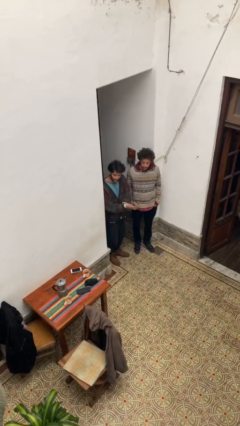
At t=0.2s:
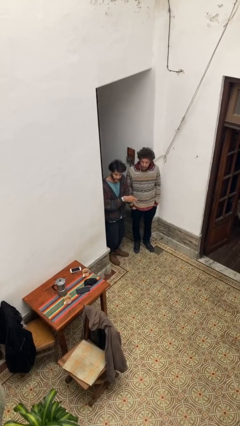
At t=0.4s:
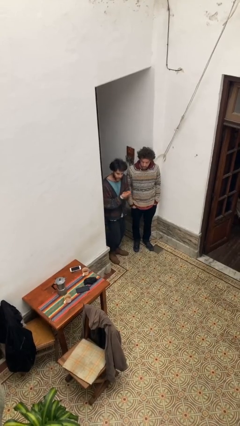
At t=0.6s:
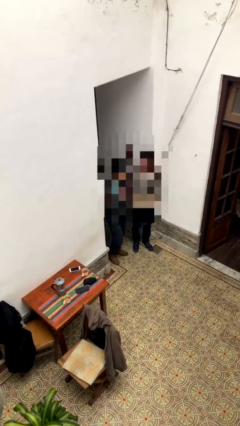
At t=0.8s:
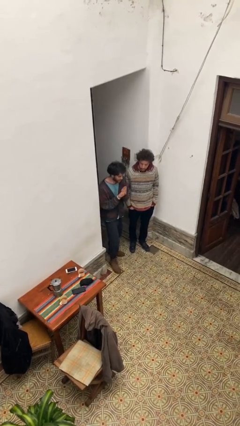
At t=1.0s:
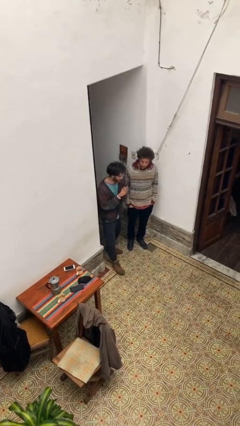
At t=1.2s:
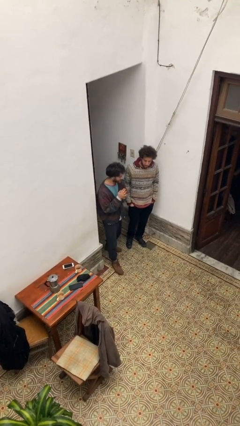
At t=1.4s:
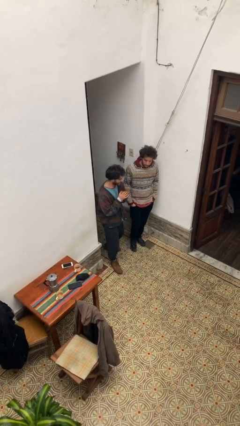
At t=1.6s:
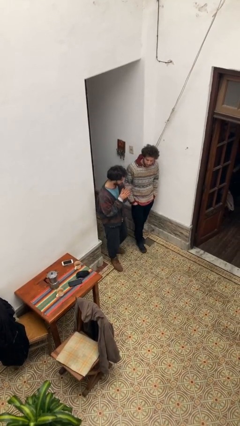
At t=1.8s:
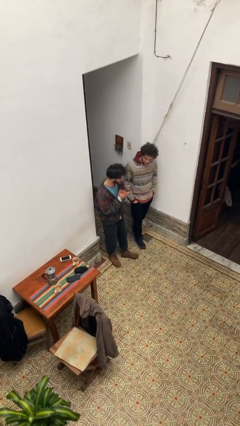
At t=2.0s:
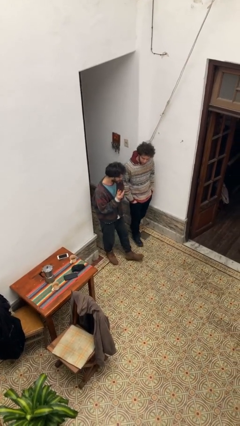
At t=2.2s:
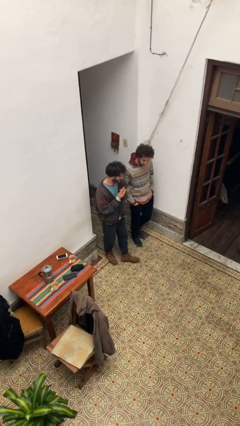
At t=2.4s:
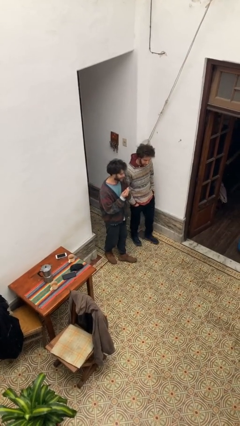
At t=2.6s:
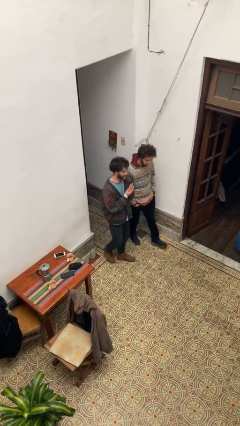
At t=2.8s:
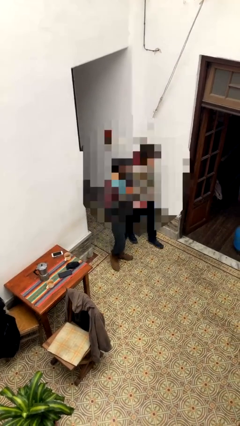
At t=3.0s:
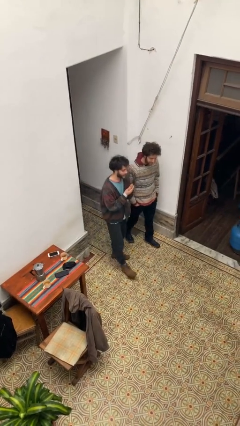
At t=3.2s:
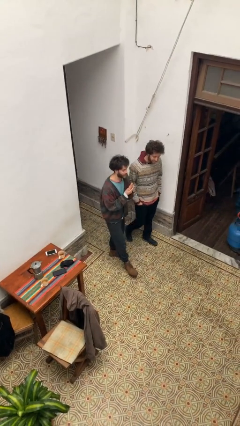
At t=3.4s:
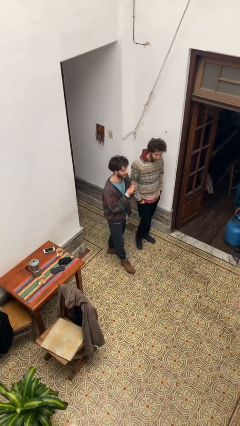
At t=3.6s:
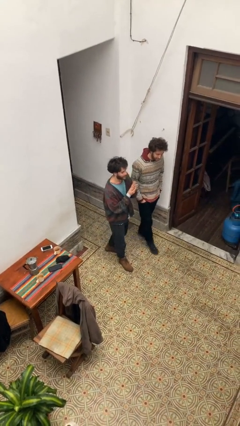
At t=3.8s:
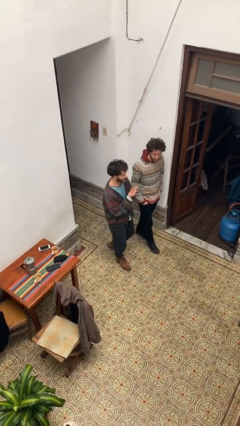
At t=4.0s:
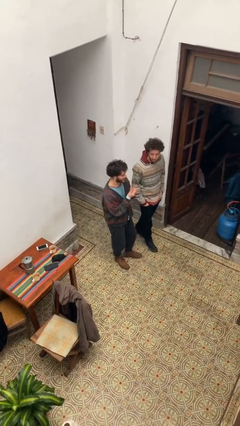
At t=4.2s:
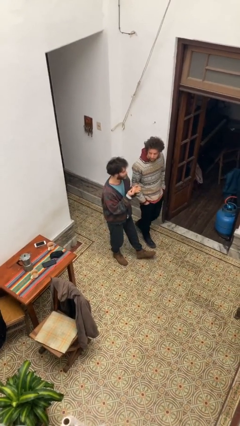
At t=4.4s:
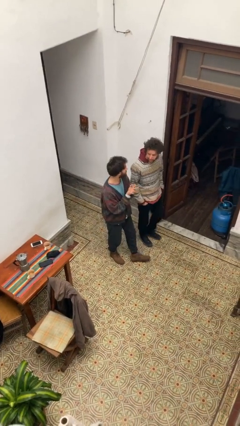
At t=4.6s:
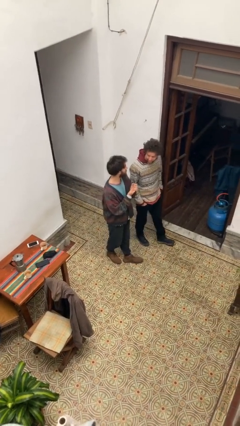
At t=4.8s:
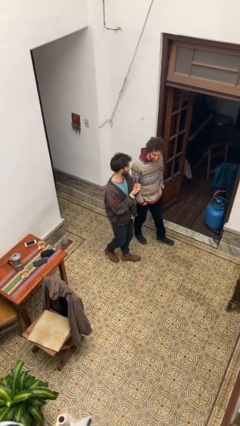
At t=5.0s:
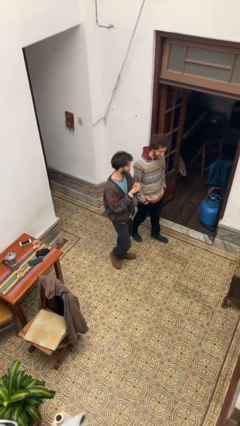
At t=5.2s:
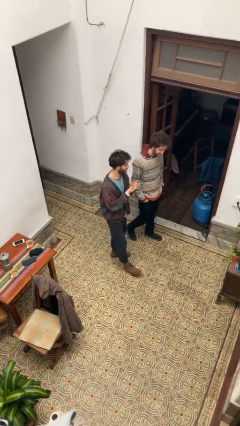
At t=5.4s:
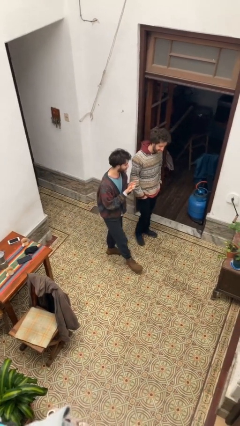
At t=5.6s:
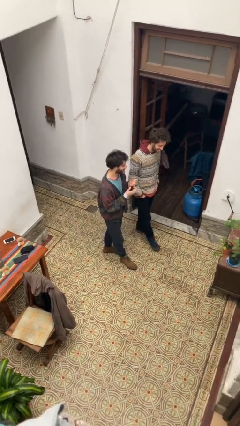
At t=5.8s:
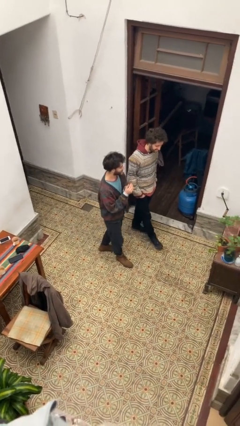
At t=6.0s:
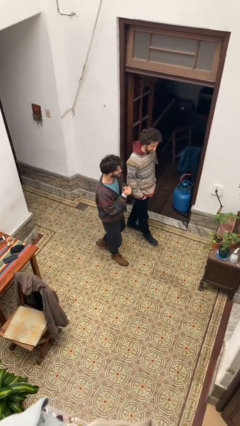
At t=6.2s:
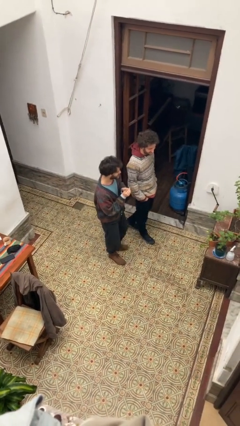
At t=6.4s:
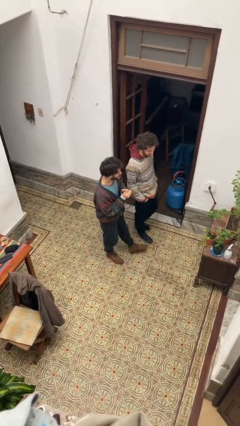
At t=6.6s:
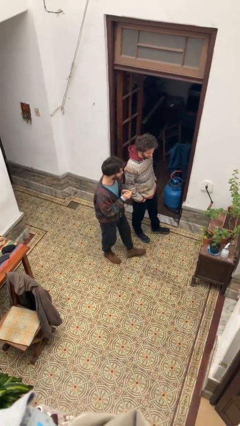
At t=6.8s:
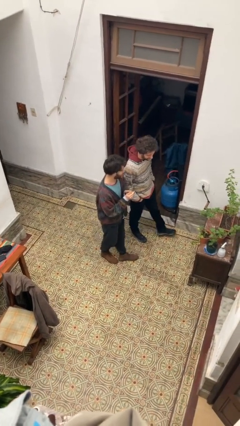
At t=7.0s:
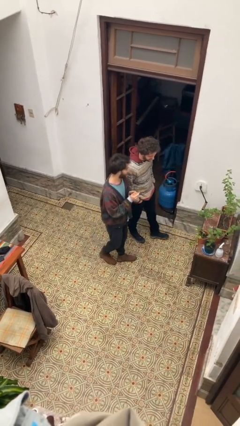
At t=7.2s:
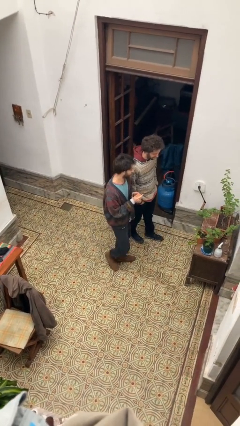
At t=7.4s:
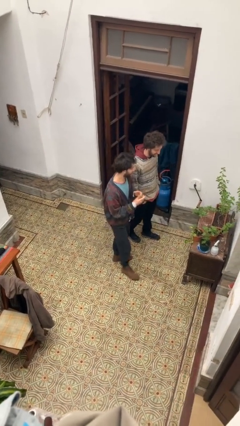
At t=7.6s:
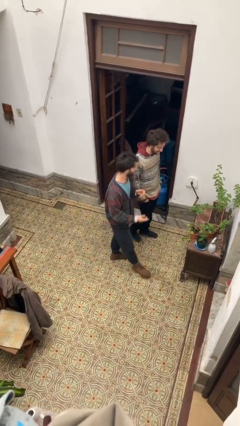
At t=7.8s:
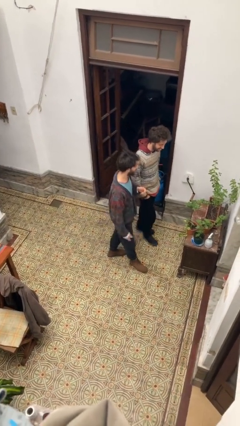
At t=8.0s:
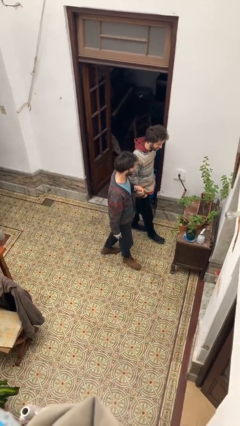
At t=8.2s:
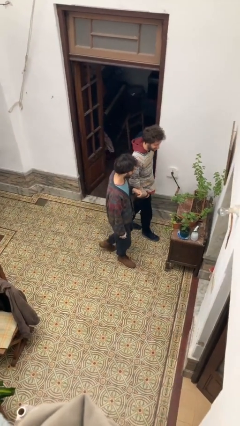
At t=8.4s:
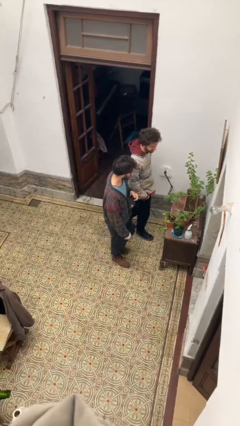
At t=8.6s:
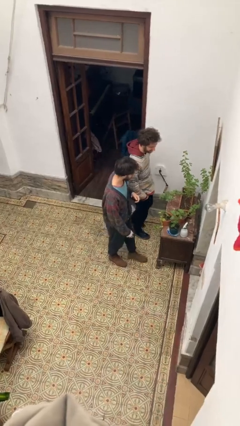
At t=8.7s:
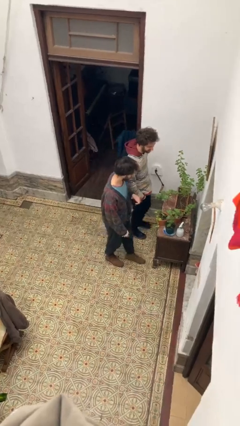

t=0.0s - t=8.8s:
person talks to person

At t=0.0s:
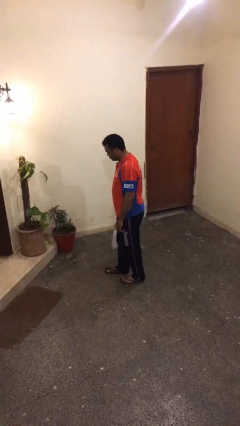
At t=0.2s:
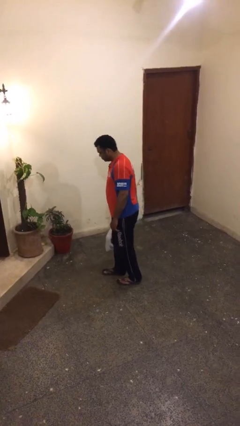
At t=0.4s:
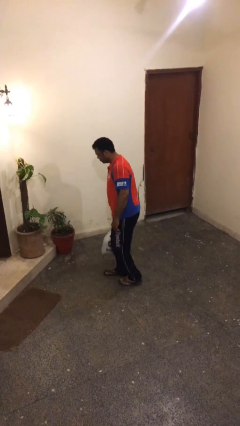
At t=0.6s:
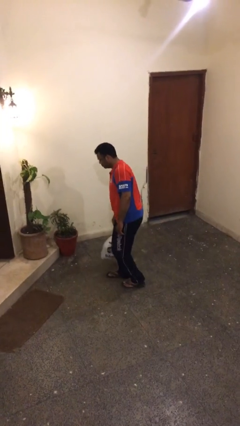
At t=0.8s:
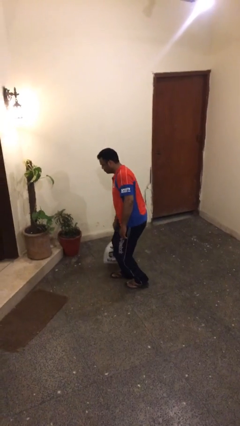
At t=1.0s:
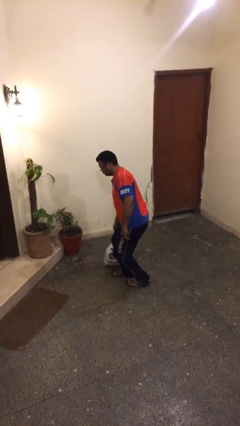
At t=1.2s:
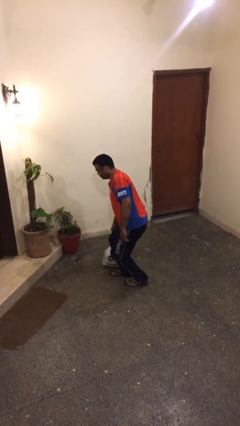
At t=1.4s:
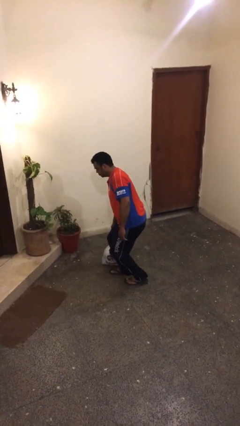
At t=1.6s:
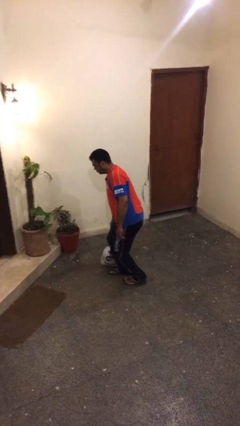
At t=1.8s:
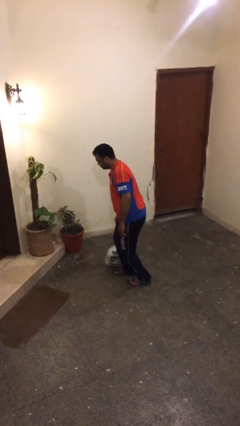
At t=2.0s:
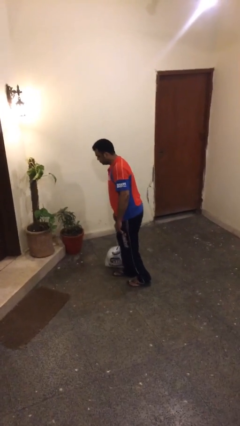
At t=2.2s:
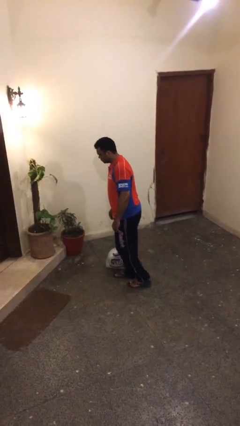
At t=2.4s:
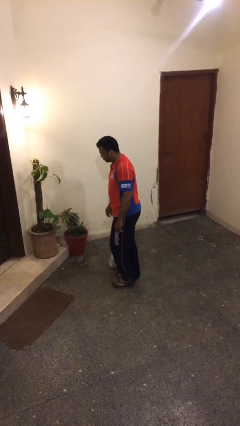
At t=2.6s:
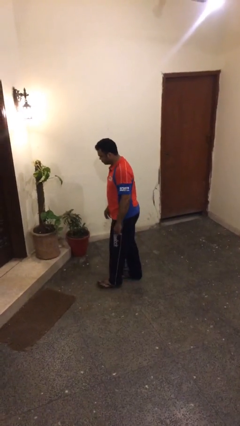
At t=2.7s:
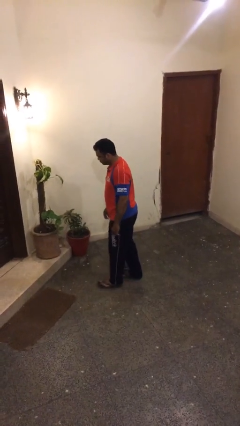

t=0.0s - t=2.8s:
person puts down object on floor

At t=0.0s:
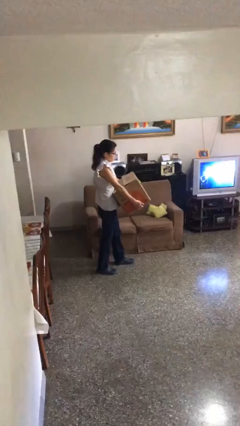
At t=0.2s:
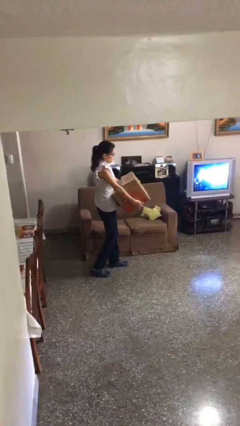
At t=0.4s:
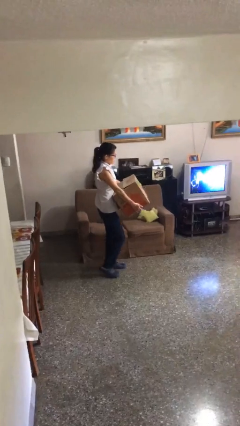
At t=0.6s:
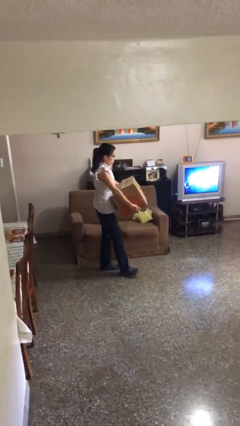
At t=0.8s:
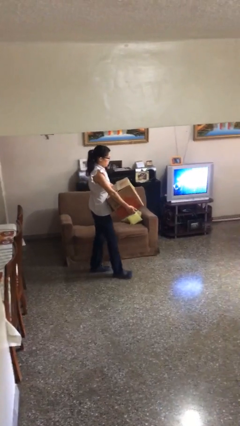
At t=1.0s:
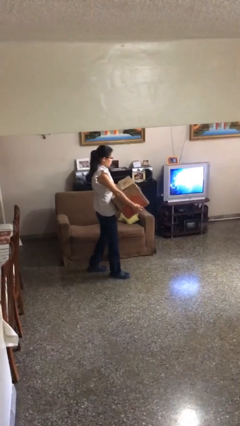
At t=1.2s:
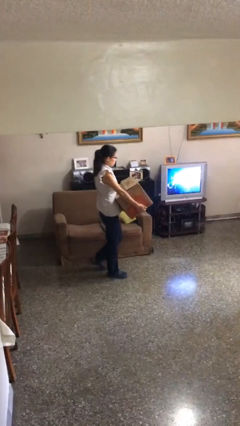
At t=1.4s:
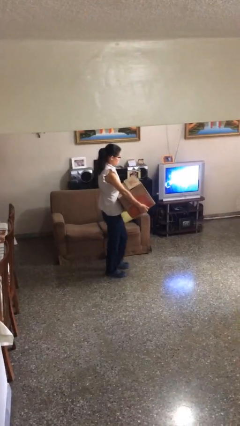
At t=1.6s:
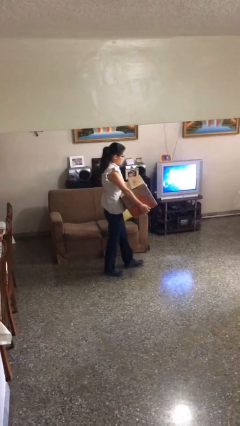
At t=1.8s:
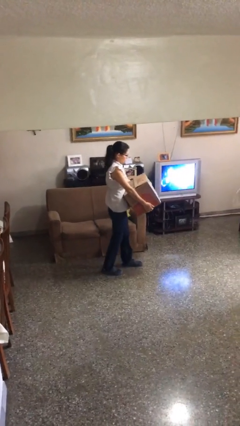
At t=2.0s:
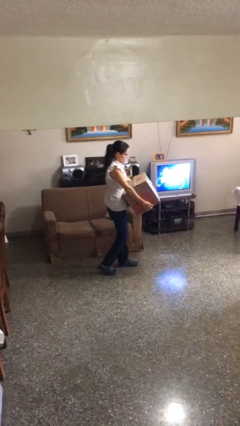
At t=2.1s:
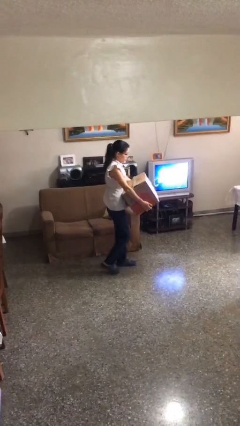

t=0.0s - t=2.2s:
person carries heavy object

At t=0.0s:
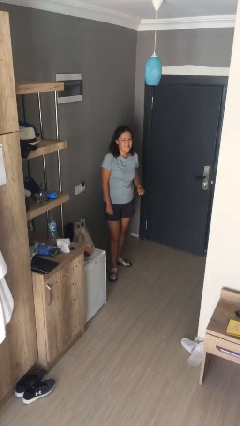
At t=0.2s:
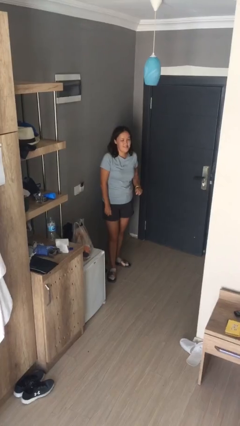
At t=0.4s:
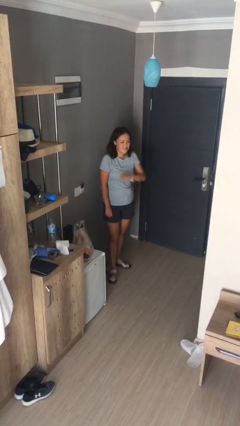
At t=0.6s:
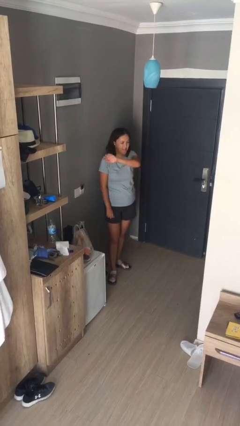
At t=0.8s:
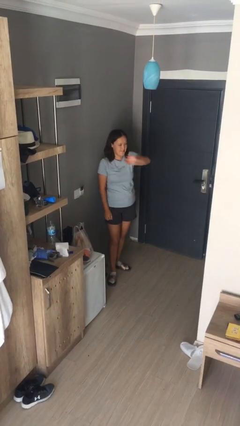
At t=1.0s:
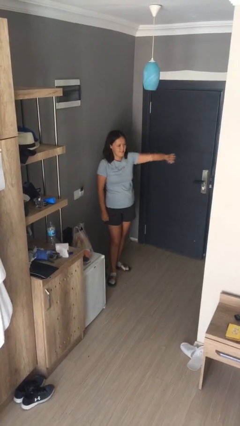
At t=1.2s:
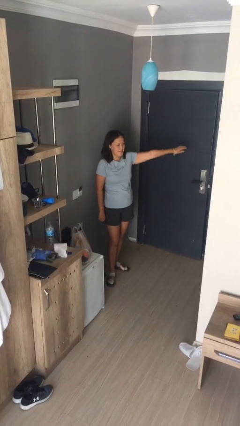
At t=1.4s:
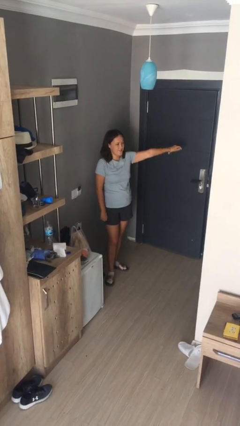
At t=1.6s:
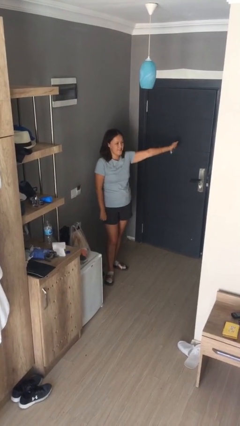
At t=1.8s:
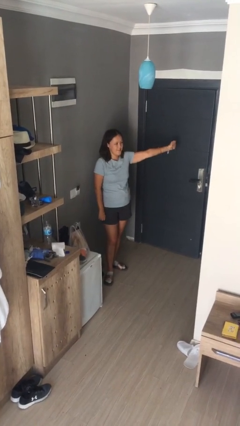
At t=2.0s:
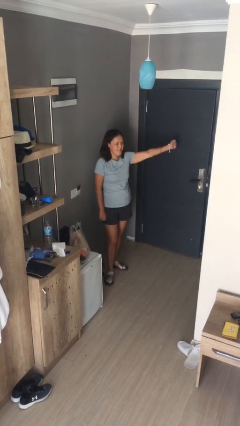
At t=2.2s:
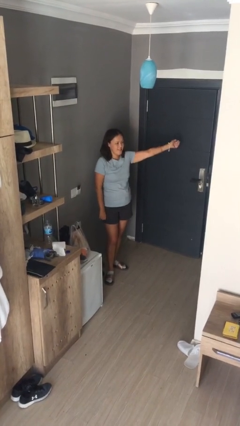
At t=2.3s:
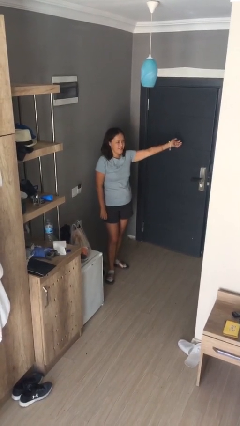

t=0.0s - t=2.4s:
person gestures swipe left

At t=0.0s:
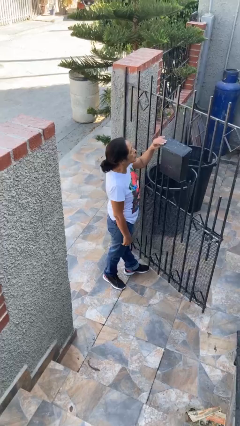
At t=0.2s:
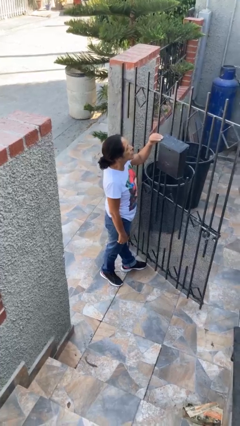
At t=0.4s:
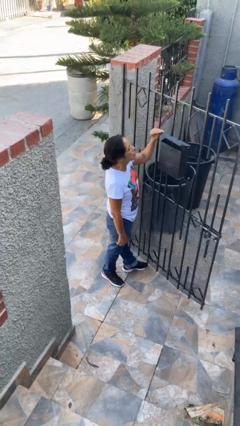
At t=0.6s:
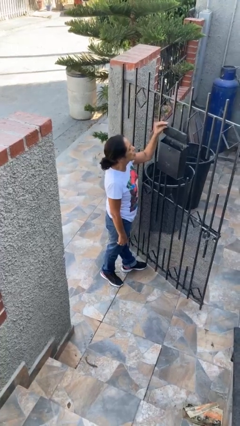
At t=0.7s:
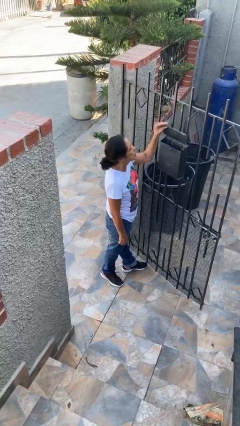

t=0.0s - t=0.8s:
person opens mailbox

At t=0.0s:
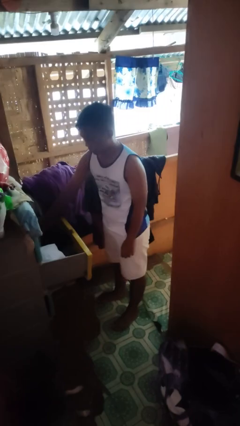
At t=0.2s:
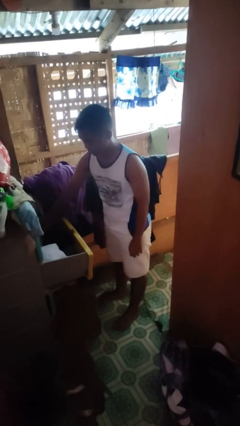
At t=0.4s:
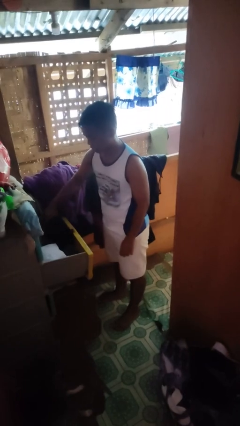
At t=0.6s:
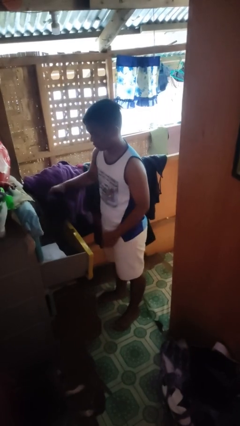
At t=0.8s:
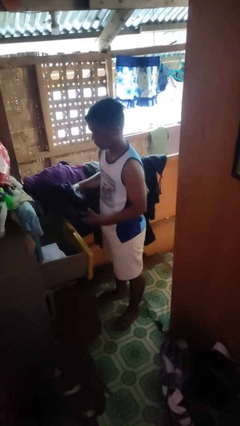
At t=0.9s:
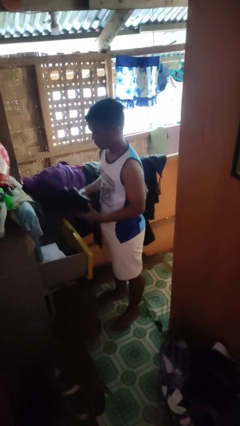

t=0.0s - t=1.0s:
person takes clothes from dresser
